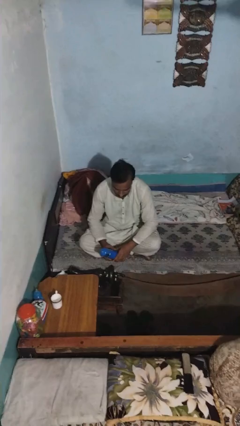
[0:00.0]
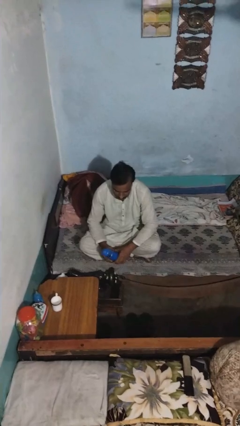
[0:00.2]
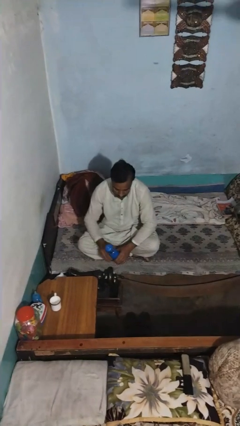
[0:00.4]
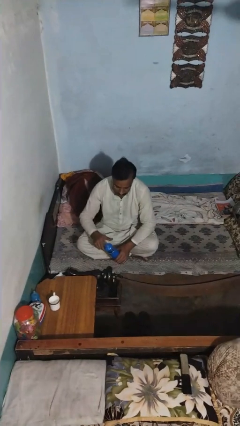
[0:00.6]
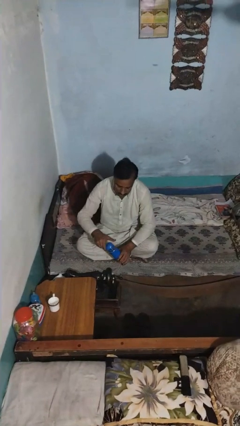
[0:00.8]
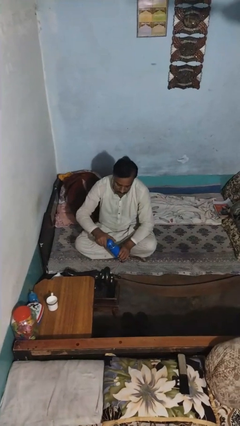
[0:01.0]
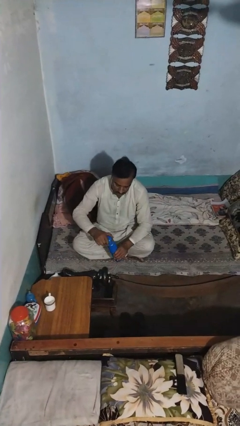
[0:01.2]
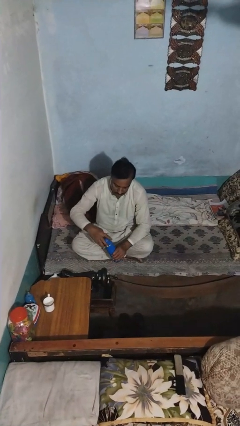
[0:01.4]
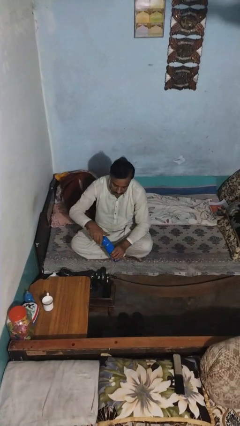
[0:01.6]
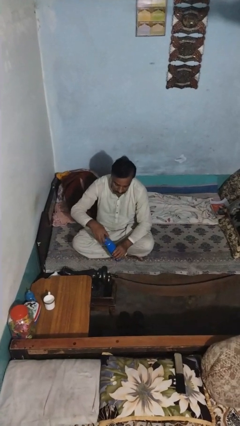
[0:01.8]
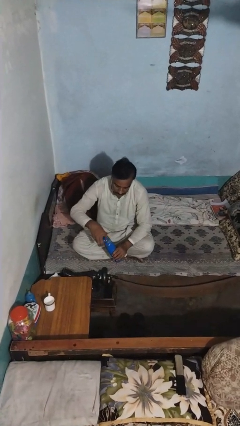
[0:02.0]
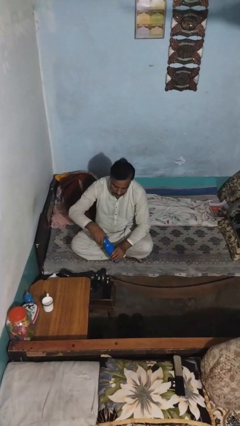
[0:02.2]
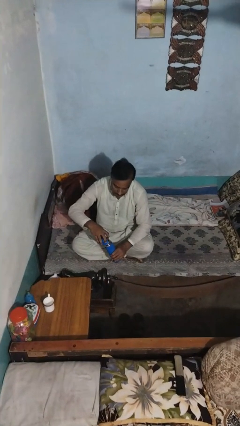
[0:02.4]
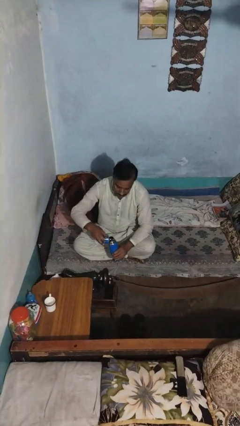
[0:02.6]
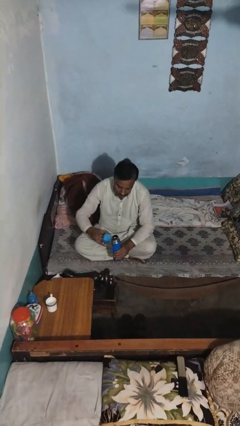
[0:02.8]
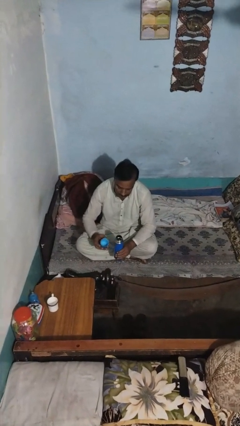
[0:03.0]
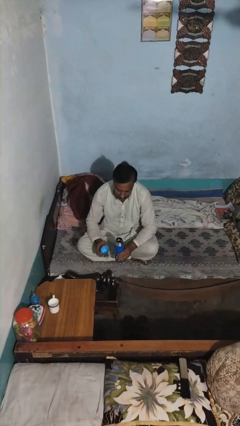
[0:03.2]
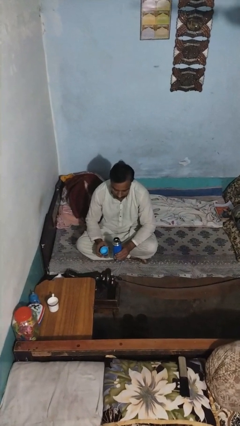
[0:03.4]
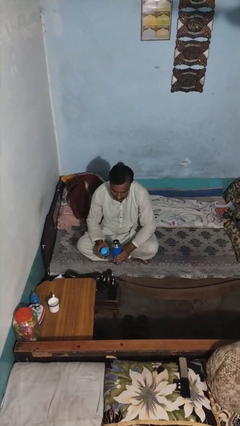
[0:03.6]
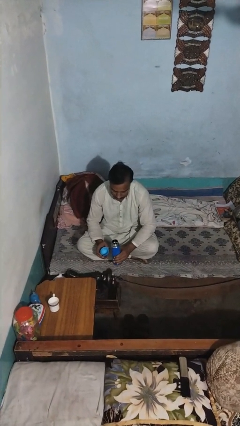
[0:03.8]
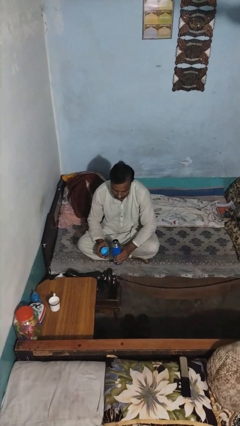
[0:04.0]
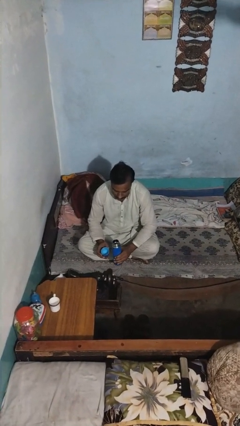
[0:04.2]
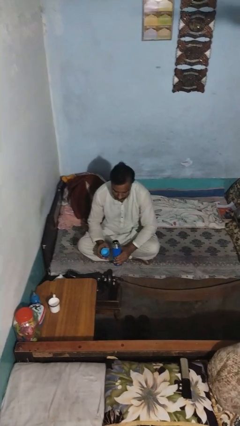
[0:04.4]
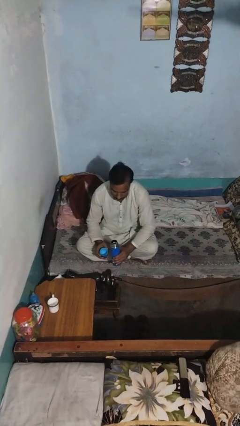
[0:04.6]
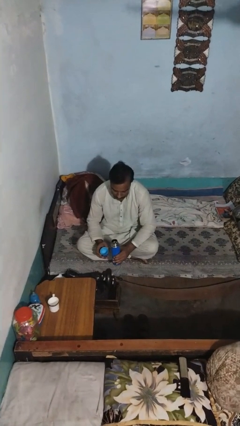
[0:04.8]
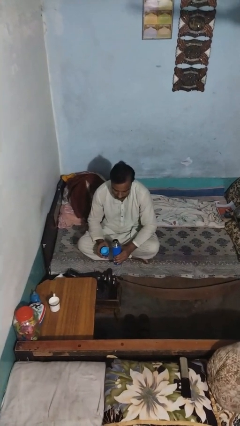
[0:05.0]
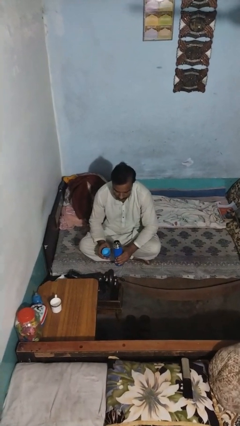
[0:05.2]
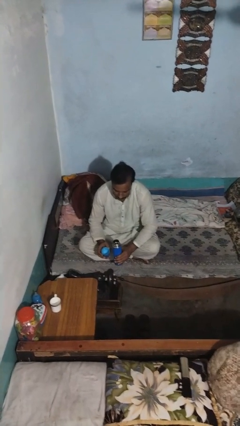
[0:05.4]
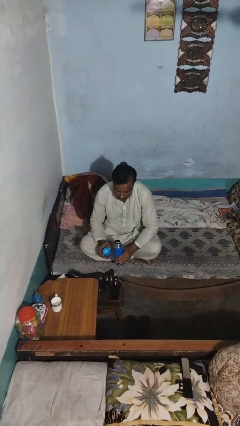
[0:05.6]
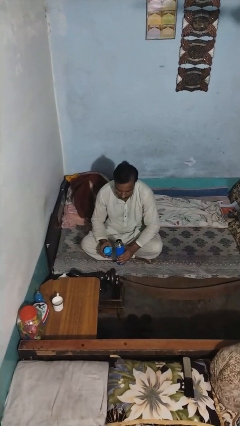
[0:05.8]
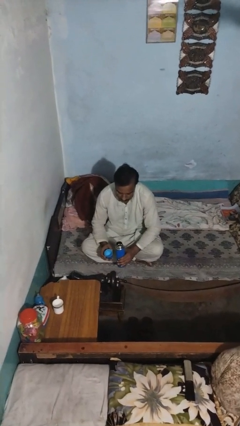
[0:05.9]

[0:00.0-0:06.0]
person unscrews lid from bottle

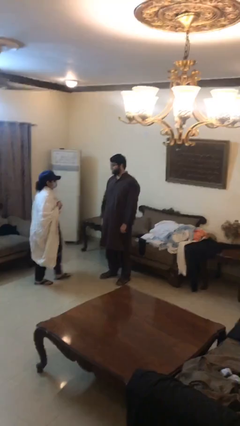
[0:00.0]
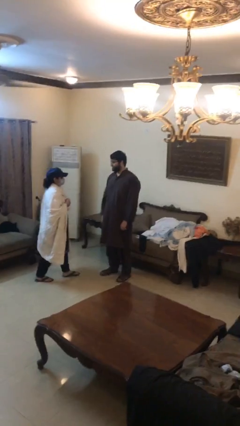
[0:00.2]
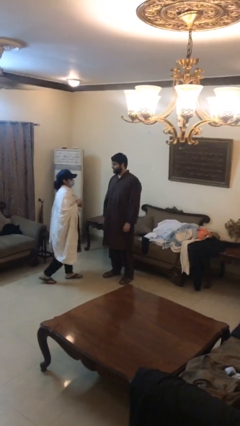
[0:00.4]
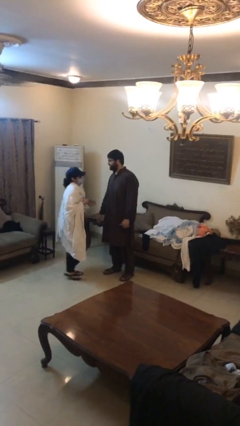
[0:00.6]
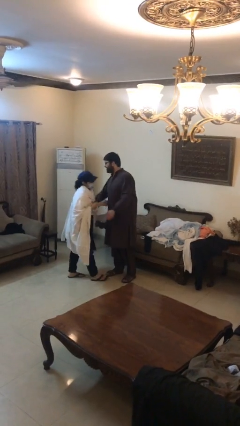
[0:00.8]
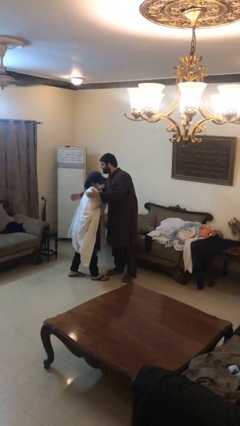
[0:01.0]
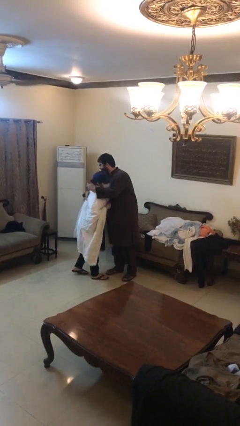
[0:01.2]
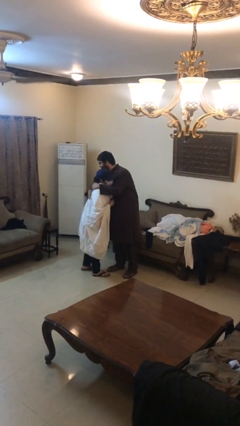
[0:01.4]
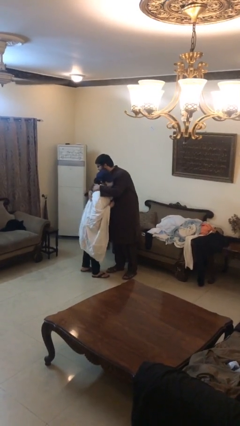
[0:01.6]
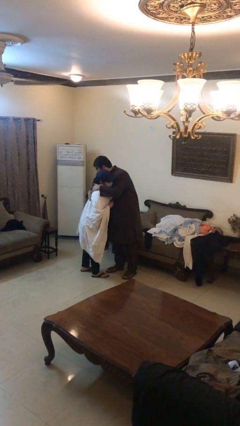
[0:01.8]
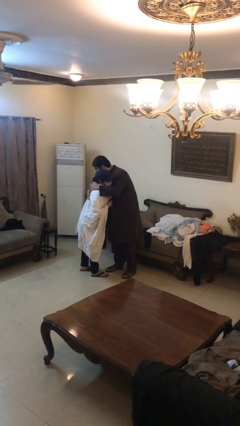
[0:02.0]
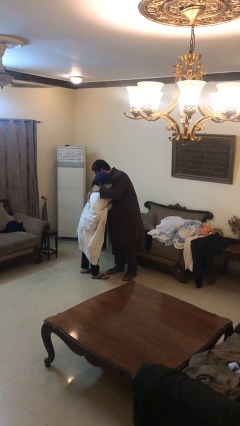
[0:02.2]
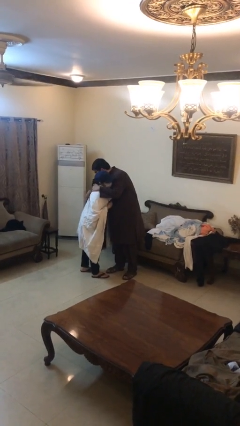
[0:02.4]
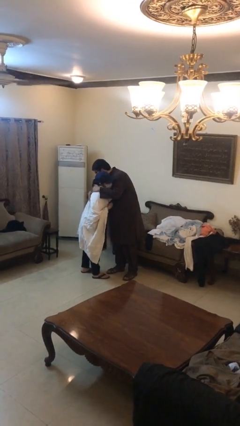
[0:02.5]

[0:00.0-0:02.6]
person embraces person

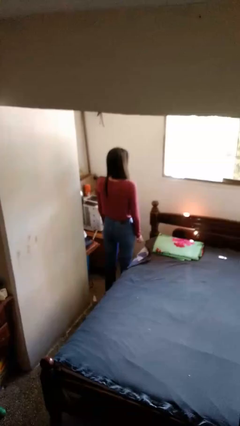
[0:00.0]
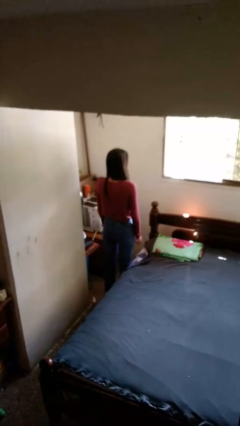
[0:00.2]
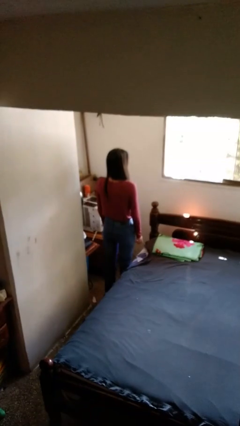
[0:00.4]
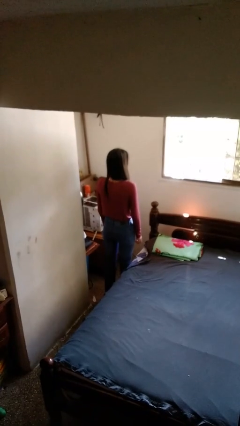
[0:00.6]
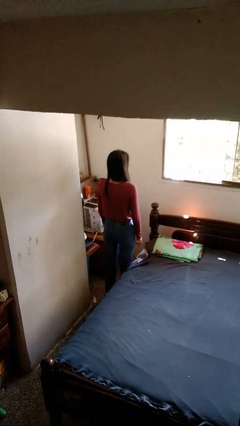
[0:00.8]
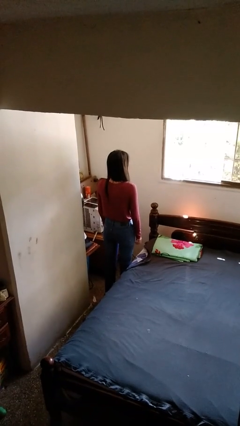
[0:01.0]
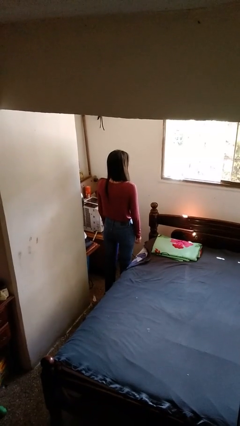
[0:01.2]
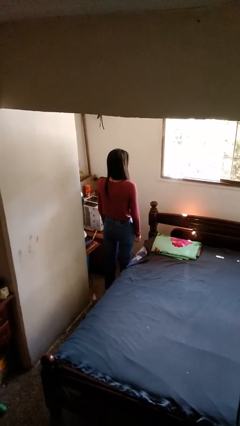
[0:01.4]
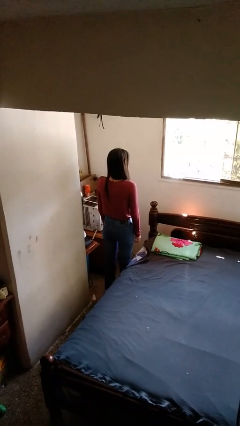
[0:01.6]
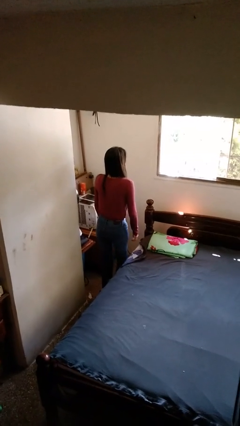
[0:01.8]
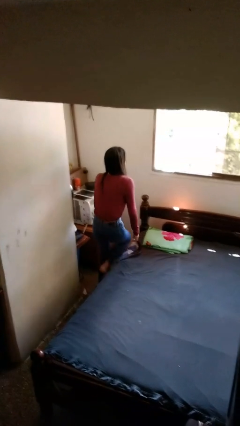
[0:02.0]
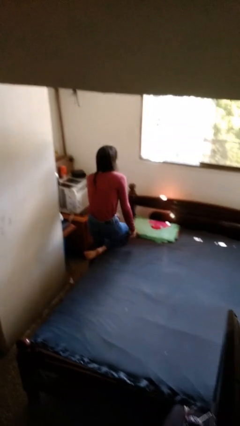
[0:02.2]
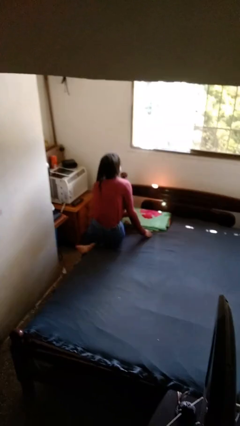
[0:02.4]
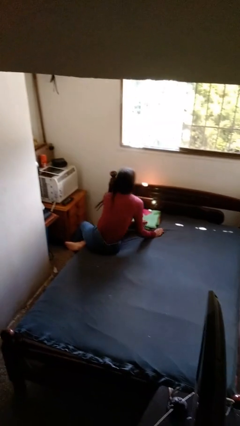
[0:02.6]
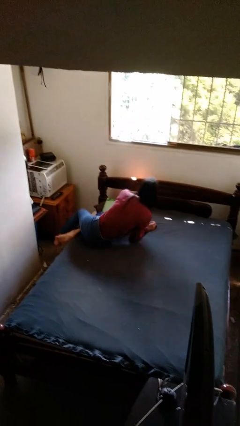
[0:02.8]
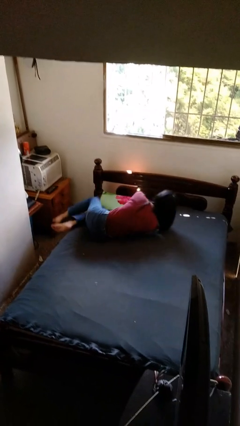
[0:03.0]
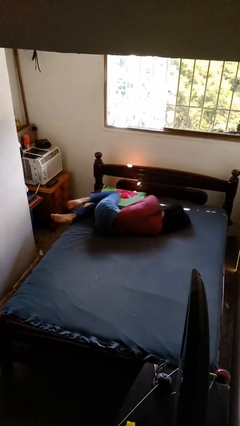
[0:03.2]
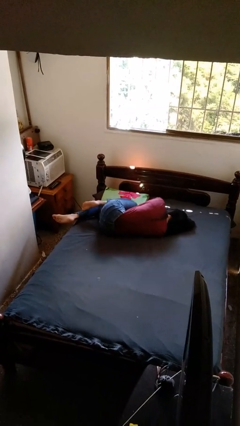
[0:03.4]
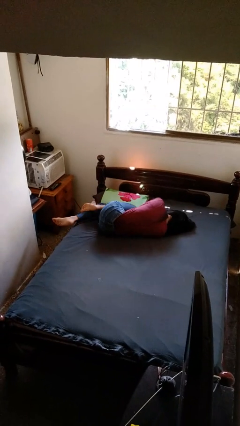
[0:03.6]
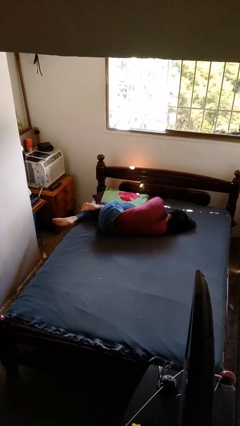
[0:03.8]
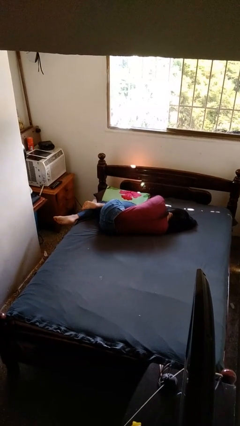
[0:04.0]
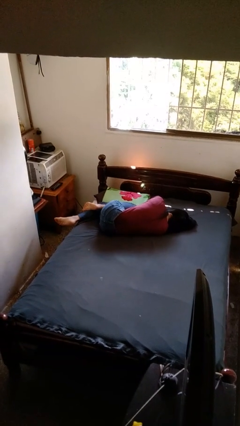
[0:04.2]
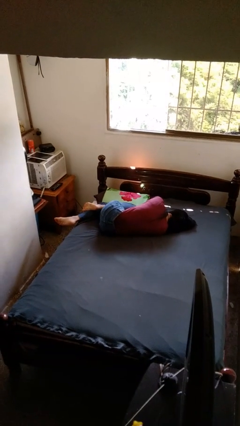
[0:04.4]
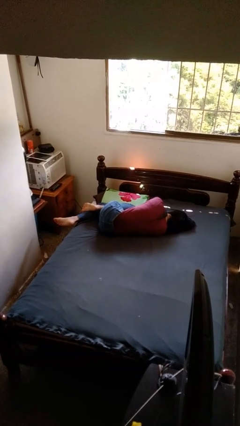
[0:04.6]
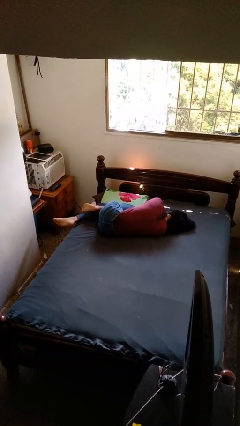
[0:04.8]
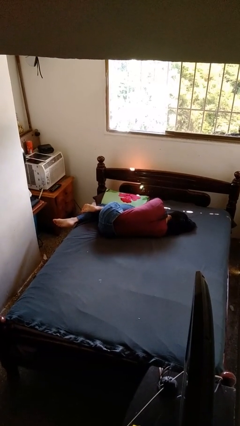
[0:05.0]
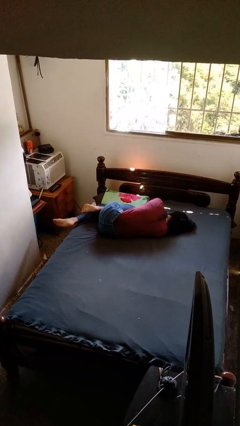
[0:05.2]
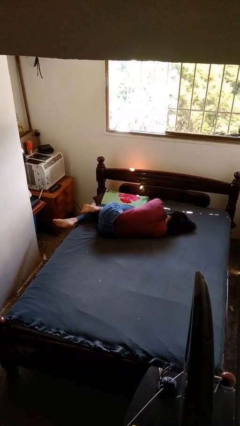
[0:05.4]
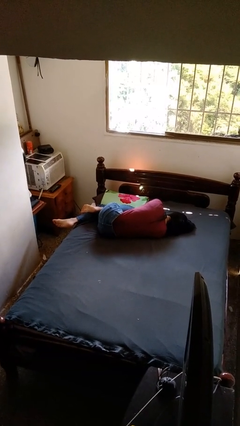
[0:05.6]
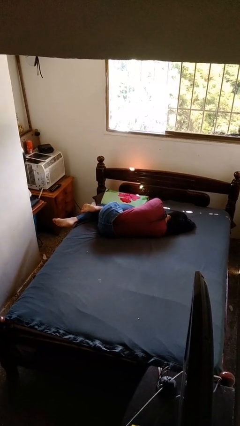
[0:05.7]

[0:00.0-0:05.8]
person lies down on bed

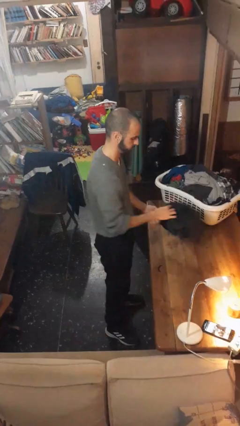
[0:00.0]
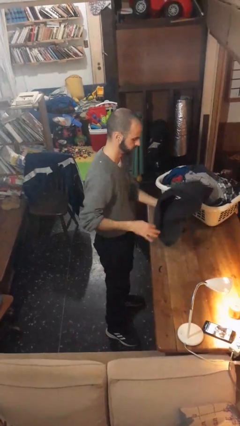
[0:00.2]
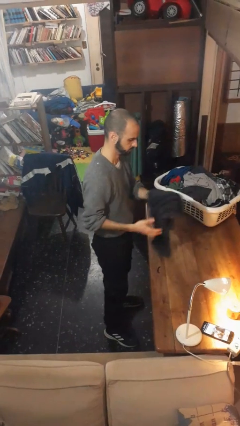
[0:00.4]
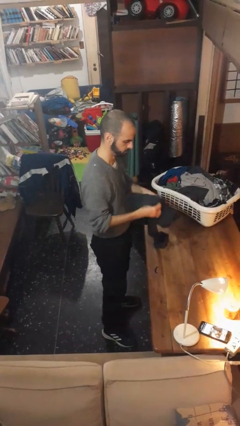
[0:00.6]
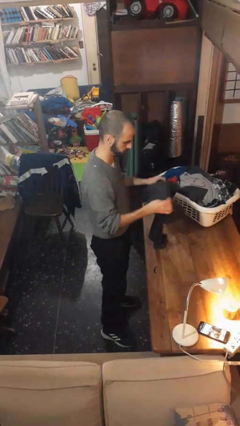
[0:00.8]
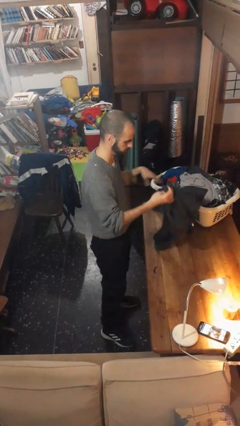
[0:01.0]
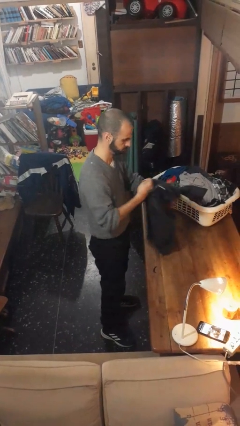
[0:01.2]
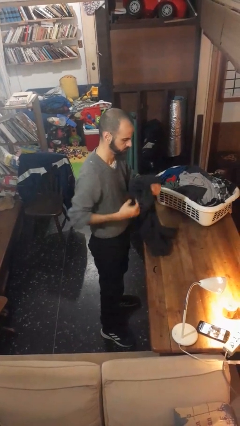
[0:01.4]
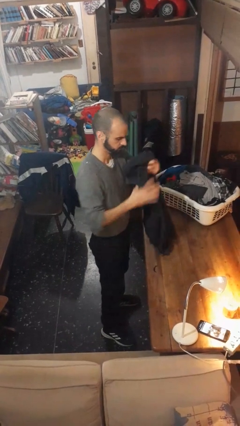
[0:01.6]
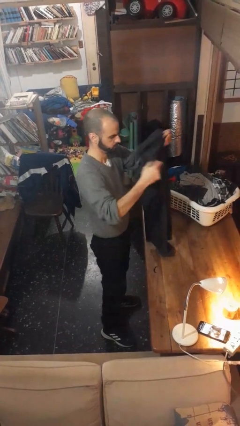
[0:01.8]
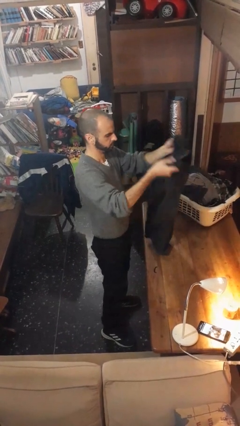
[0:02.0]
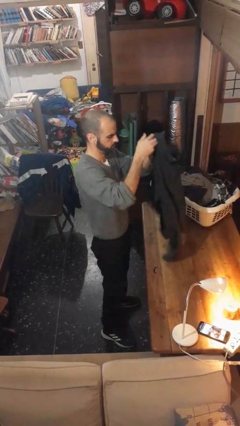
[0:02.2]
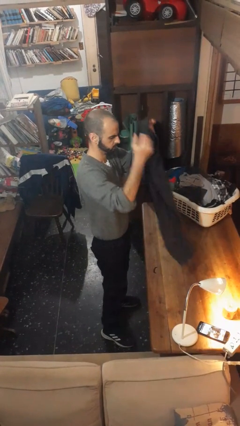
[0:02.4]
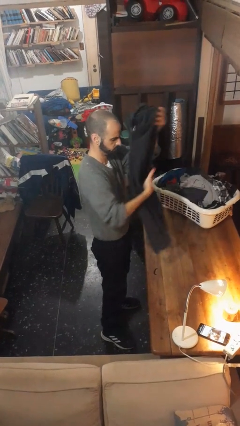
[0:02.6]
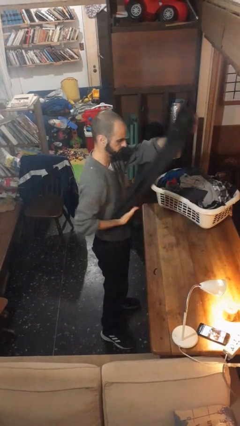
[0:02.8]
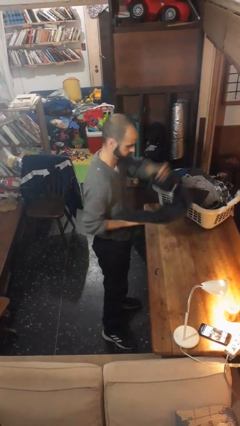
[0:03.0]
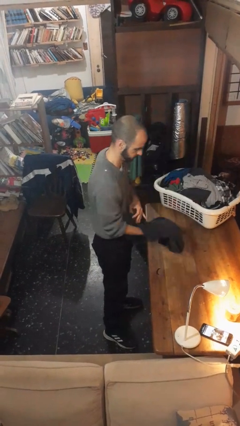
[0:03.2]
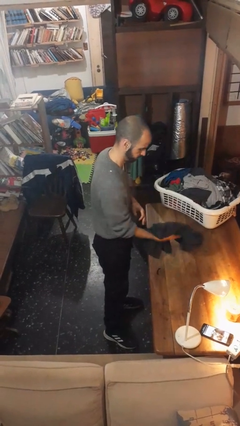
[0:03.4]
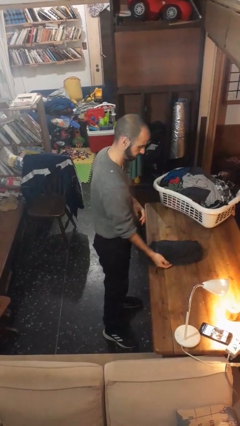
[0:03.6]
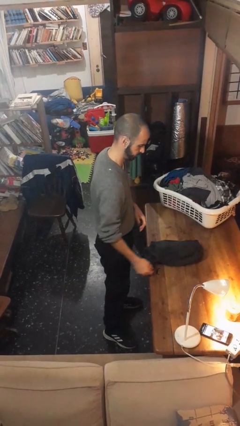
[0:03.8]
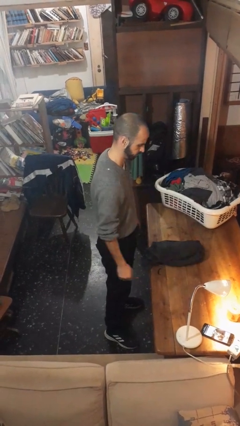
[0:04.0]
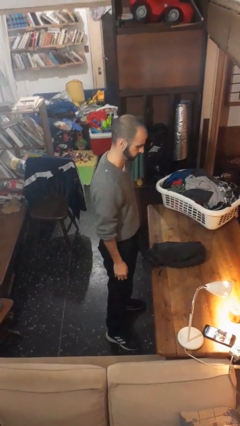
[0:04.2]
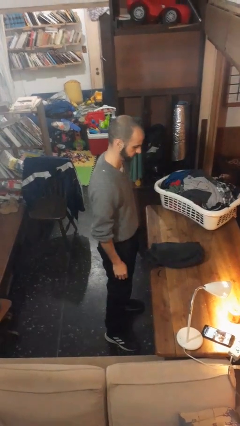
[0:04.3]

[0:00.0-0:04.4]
person folds pants
